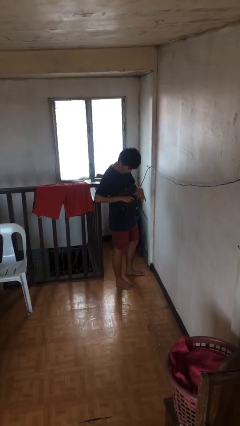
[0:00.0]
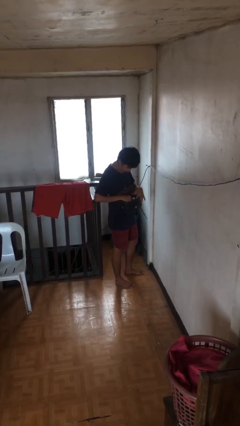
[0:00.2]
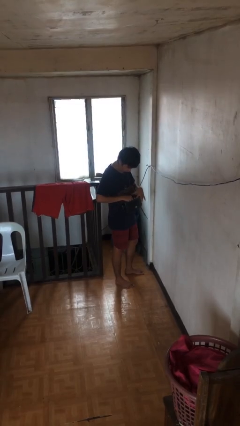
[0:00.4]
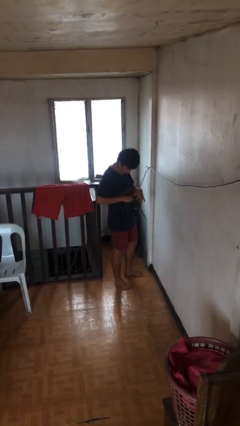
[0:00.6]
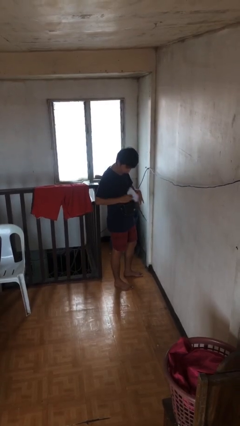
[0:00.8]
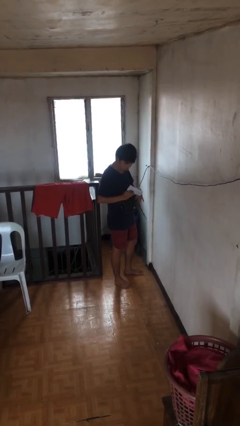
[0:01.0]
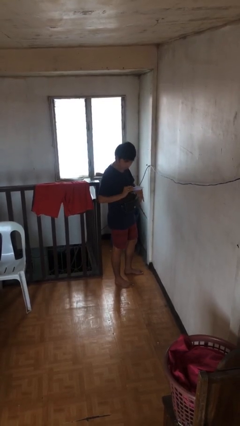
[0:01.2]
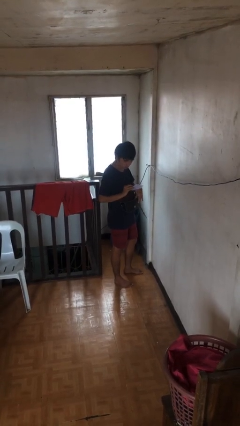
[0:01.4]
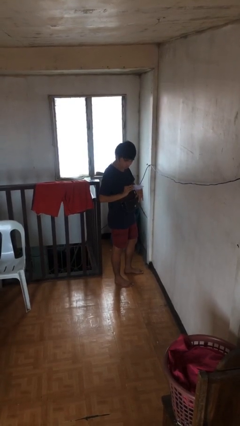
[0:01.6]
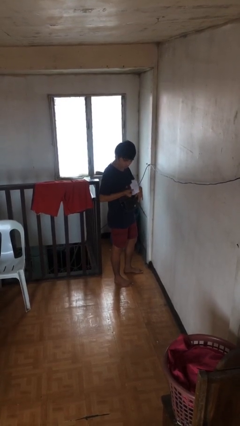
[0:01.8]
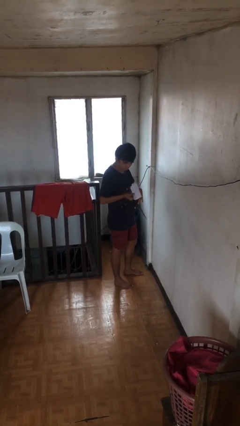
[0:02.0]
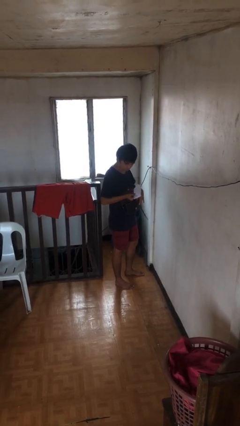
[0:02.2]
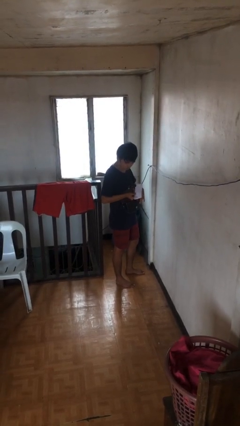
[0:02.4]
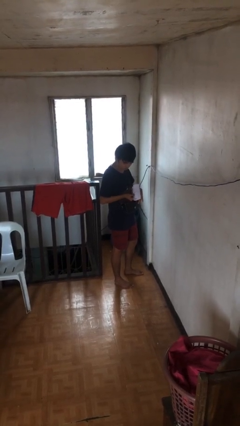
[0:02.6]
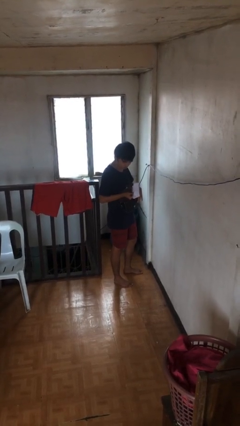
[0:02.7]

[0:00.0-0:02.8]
person takes object from purse

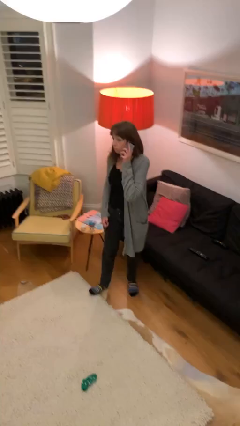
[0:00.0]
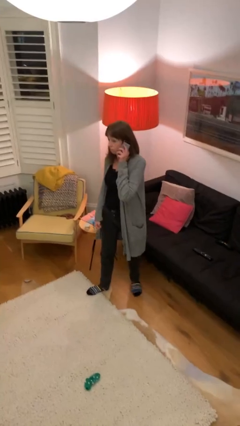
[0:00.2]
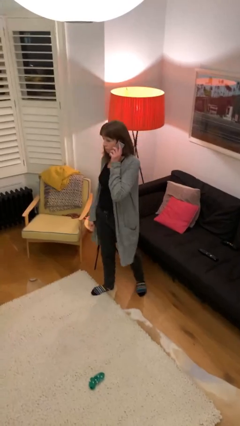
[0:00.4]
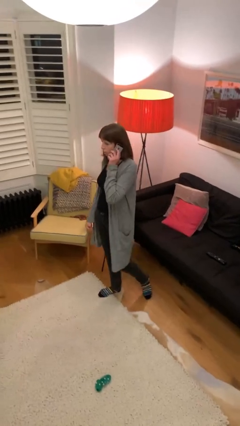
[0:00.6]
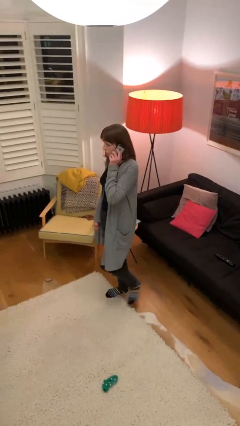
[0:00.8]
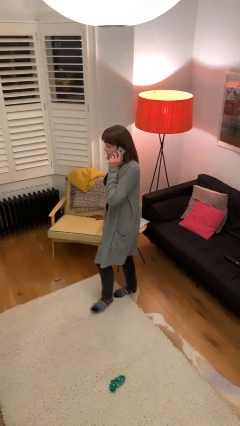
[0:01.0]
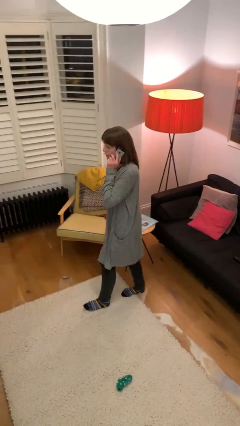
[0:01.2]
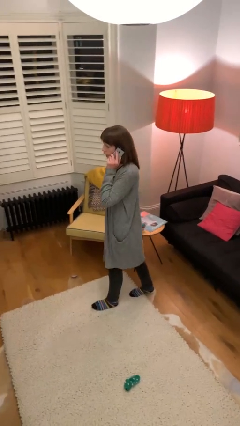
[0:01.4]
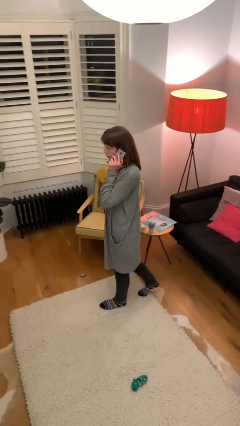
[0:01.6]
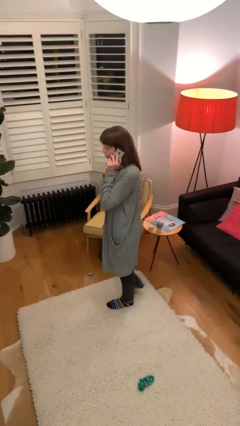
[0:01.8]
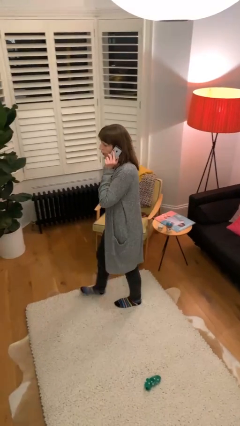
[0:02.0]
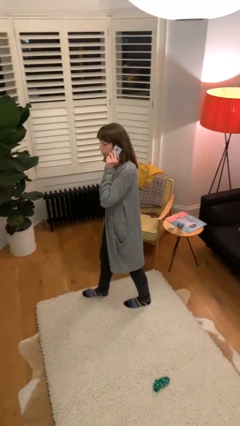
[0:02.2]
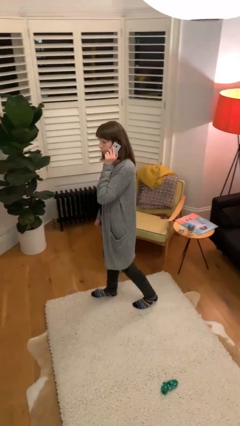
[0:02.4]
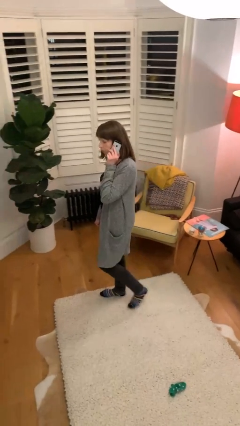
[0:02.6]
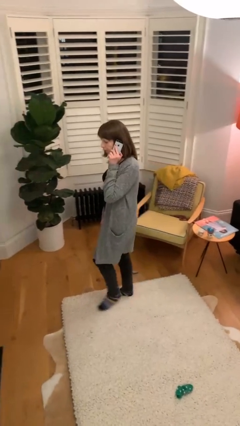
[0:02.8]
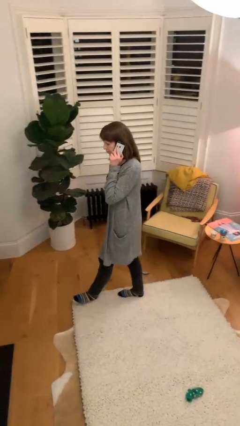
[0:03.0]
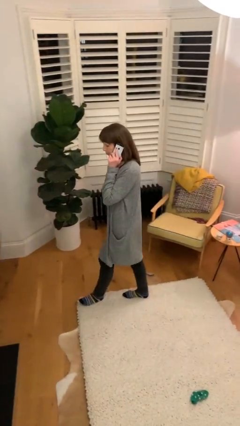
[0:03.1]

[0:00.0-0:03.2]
person talks on phone

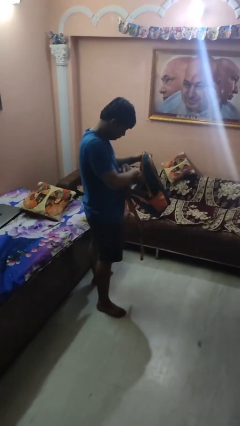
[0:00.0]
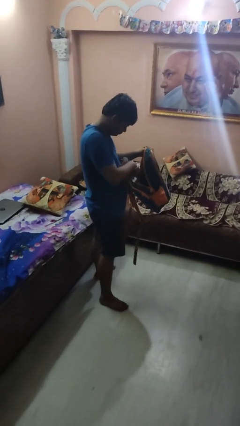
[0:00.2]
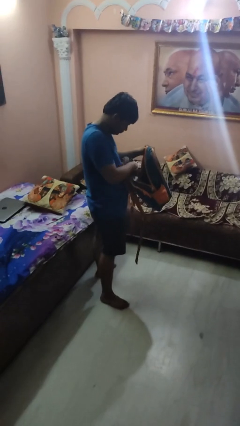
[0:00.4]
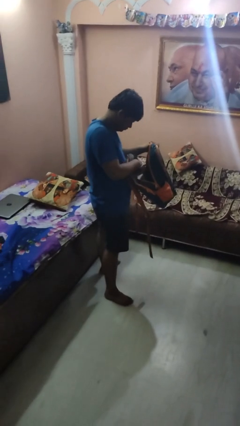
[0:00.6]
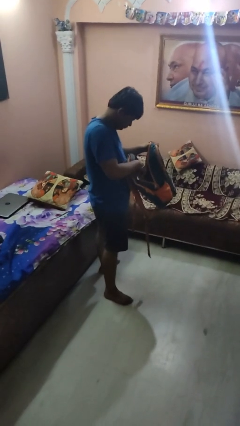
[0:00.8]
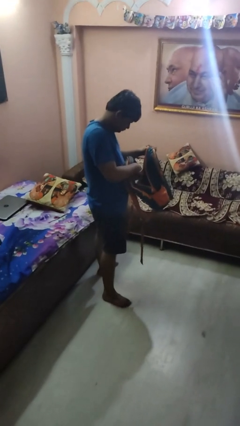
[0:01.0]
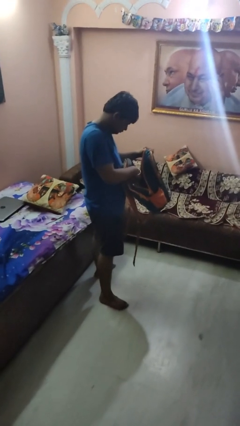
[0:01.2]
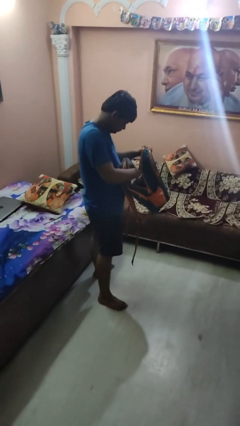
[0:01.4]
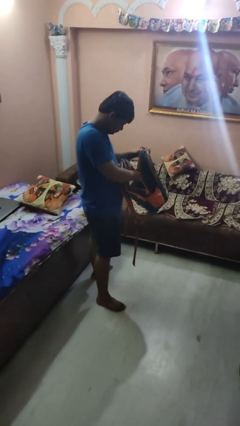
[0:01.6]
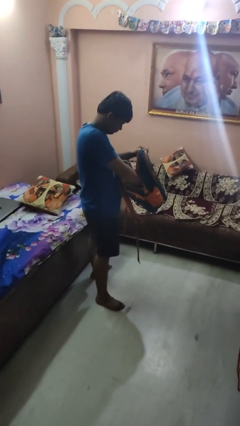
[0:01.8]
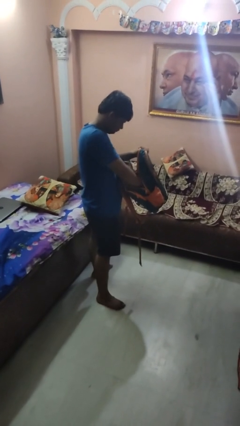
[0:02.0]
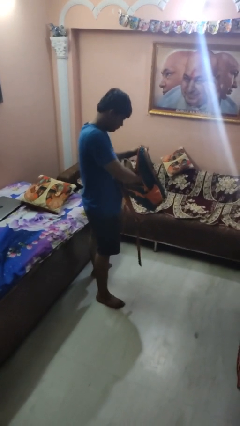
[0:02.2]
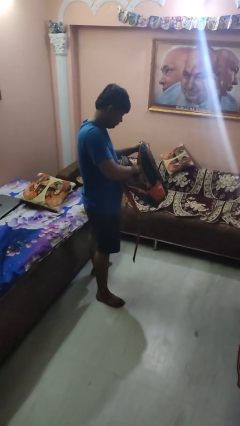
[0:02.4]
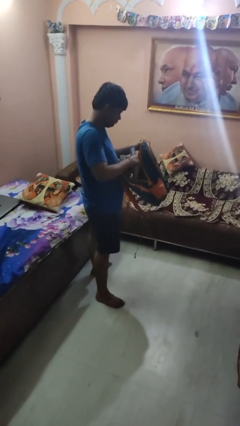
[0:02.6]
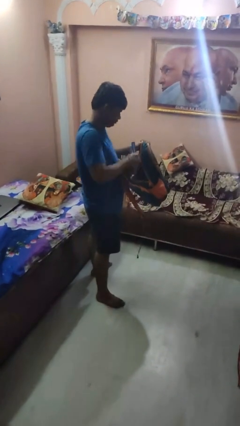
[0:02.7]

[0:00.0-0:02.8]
person searches in backpack

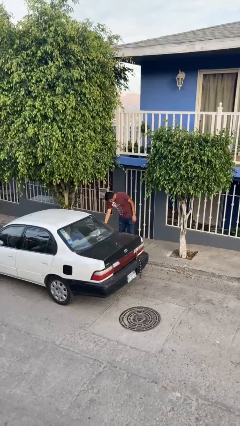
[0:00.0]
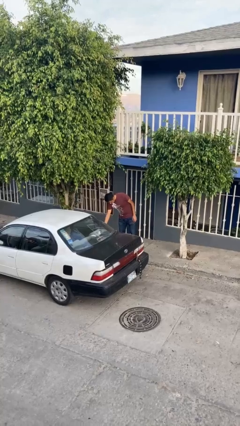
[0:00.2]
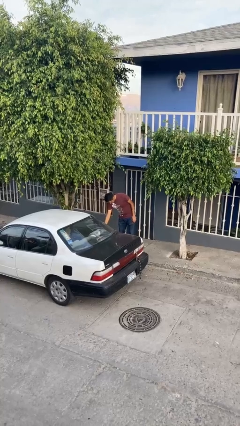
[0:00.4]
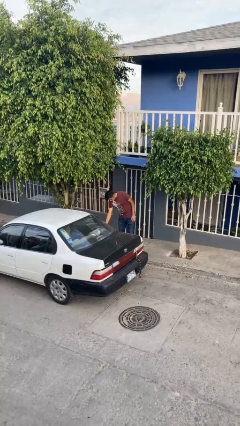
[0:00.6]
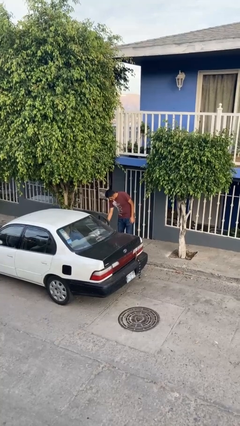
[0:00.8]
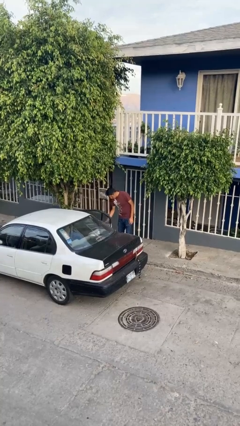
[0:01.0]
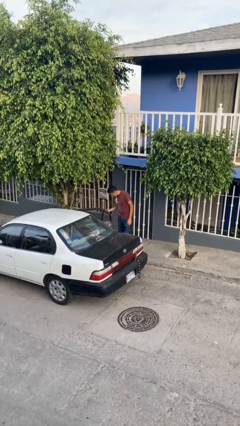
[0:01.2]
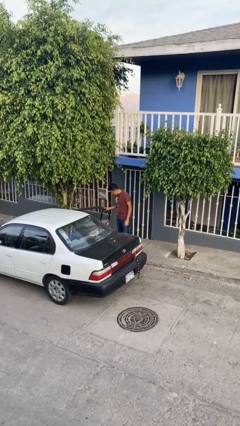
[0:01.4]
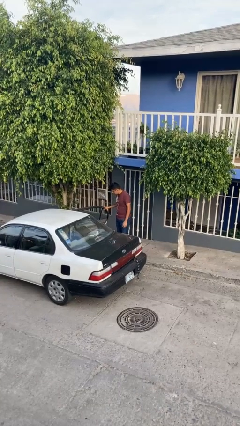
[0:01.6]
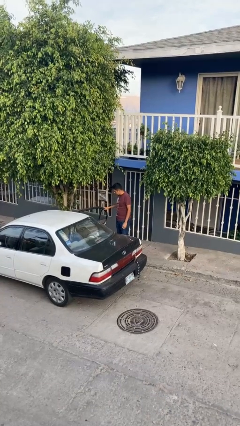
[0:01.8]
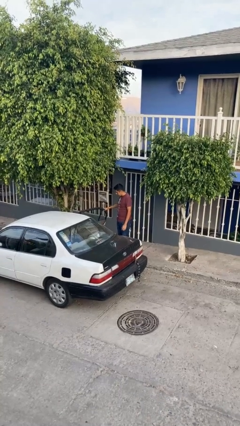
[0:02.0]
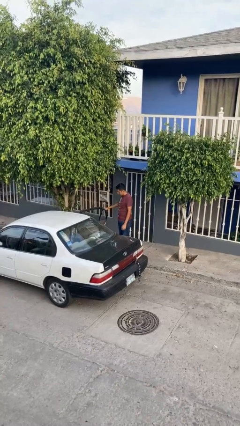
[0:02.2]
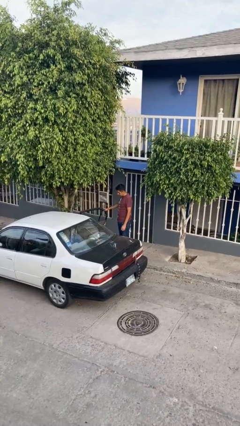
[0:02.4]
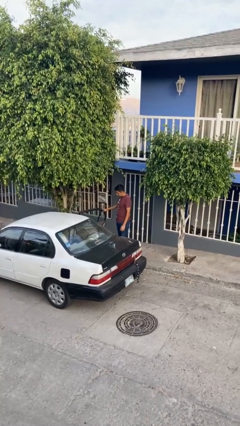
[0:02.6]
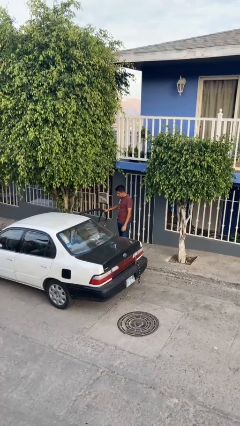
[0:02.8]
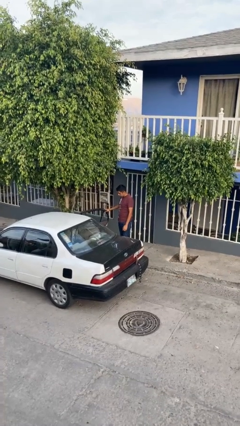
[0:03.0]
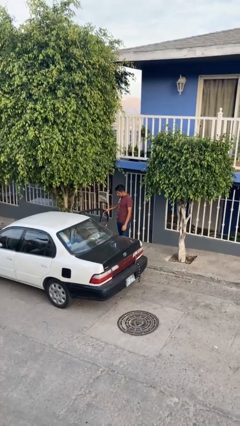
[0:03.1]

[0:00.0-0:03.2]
person opens car door

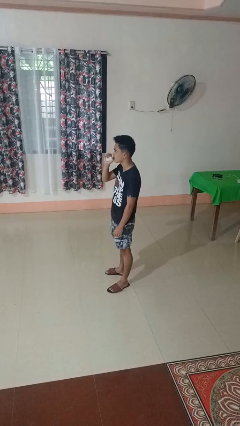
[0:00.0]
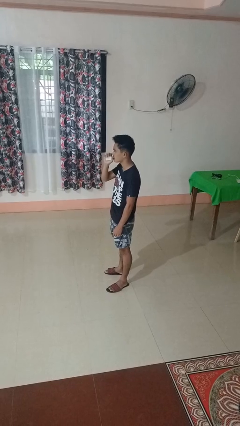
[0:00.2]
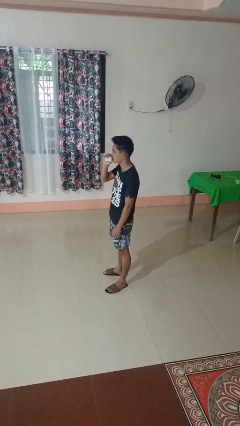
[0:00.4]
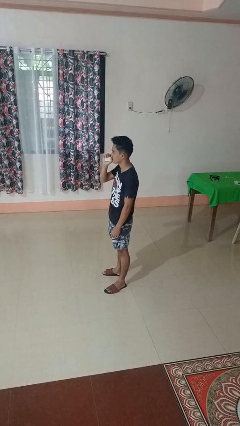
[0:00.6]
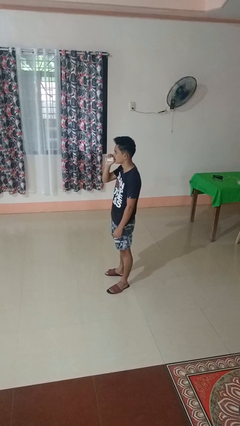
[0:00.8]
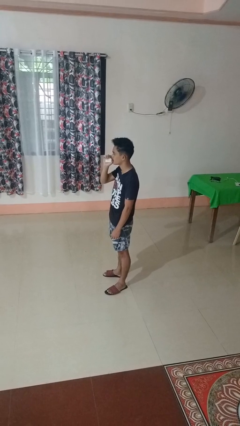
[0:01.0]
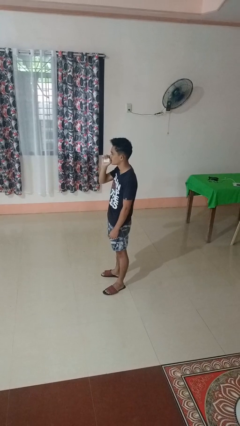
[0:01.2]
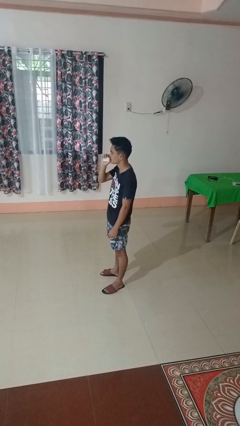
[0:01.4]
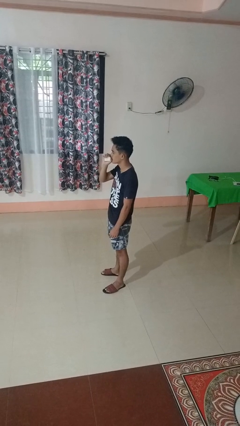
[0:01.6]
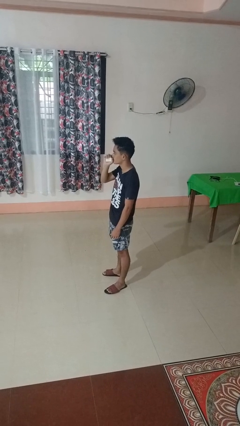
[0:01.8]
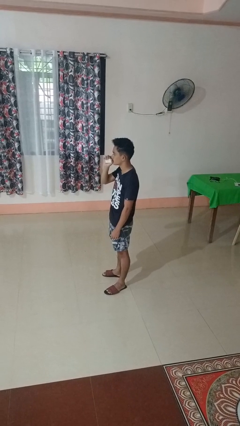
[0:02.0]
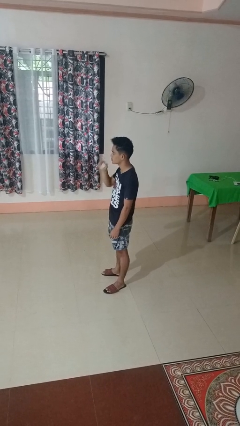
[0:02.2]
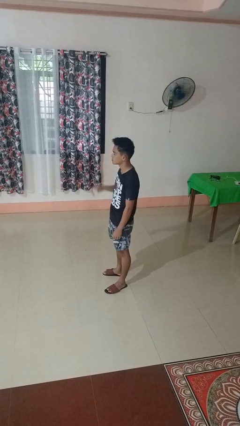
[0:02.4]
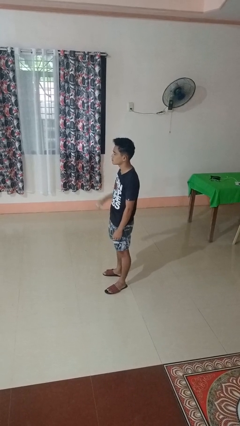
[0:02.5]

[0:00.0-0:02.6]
person vapes

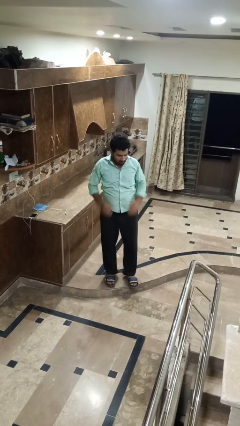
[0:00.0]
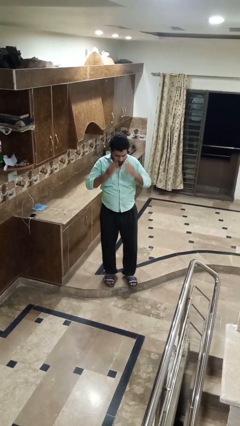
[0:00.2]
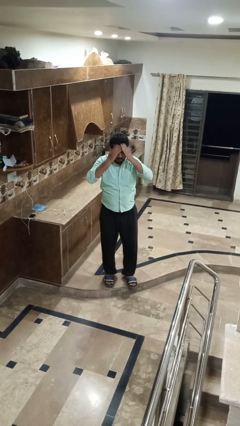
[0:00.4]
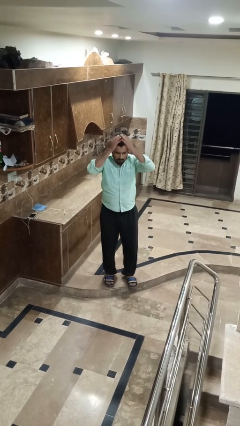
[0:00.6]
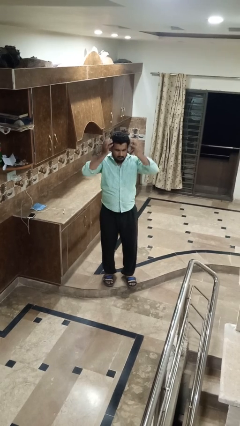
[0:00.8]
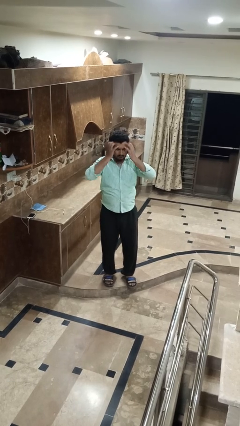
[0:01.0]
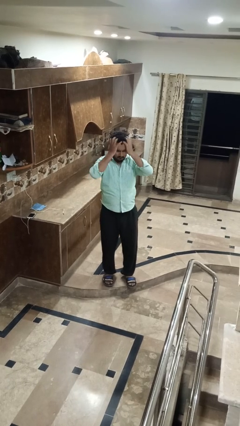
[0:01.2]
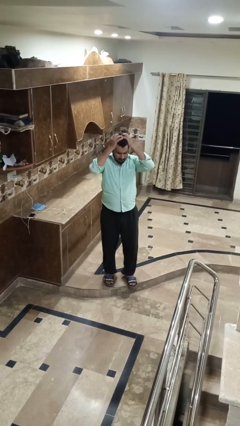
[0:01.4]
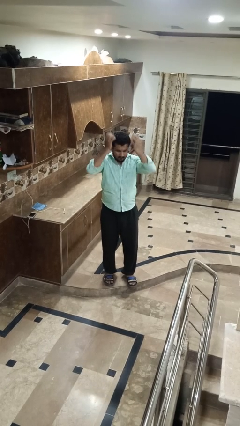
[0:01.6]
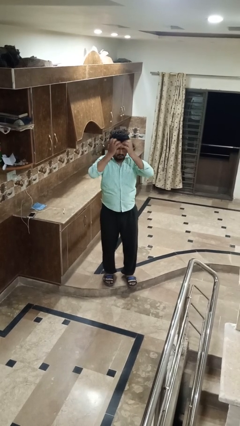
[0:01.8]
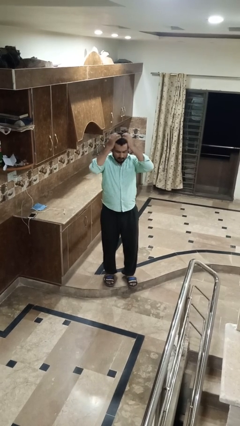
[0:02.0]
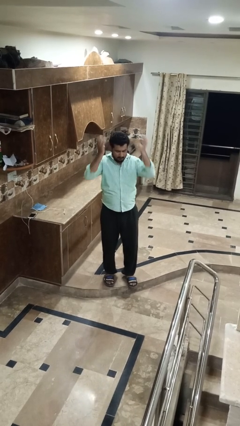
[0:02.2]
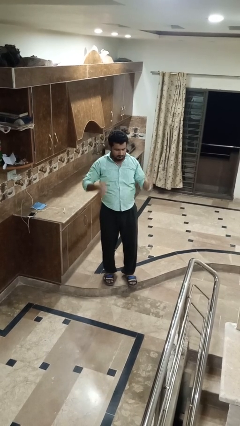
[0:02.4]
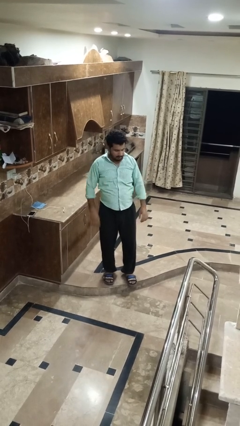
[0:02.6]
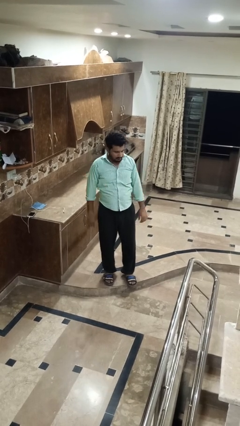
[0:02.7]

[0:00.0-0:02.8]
person strokes hair
